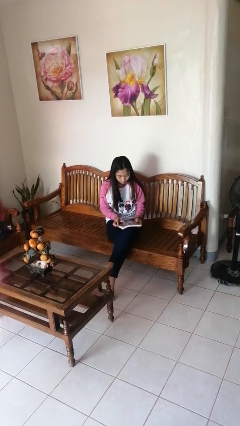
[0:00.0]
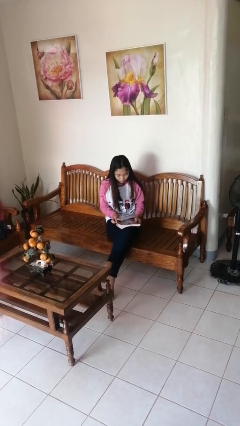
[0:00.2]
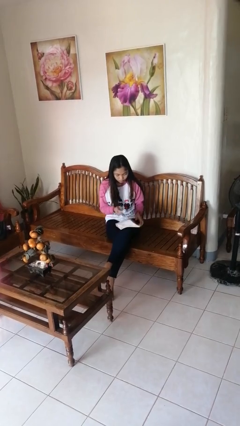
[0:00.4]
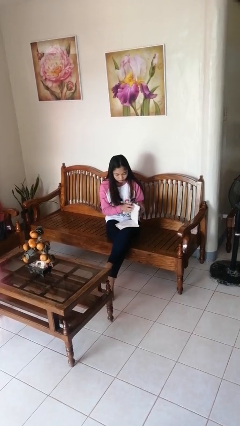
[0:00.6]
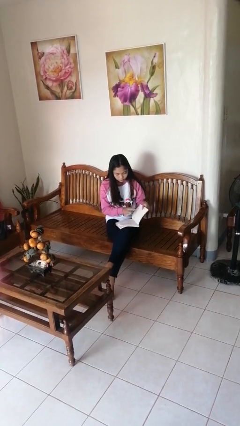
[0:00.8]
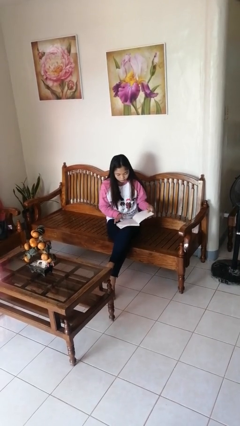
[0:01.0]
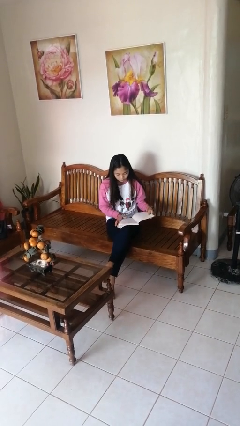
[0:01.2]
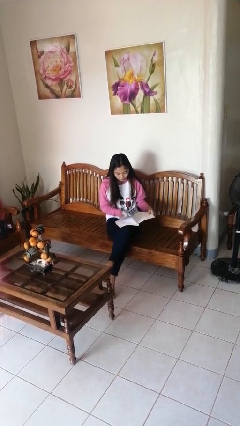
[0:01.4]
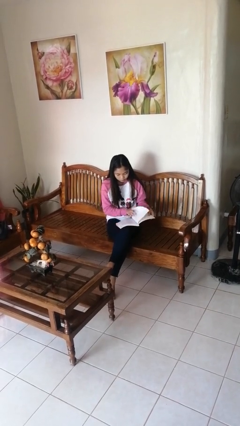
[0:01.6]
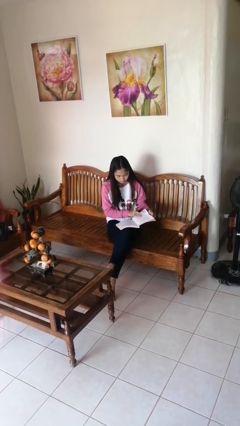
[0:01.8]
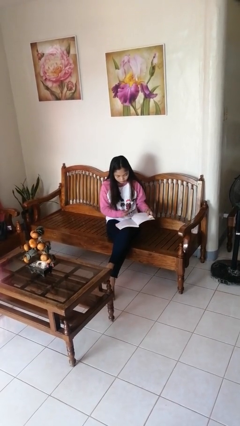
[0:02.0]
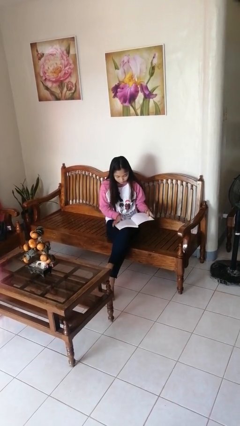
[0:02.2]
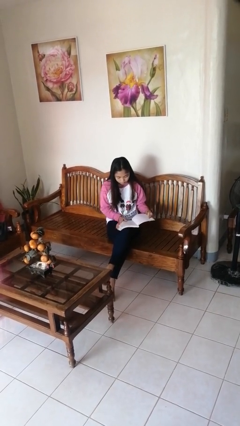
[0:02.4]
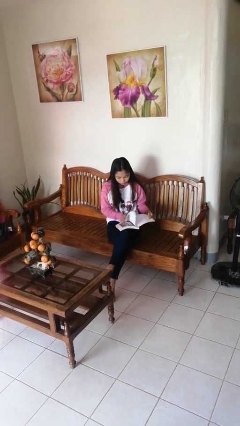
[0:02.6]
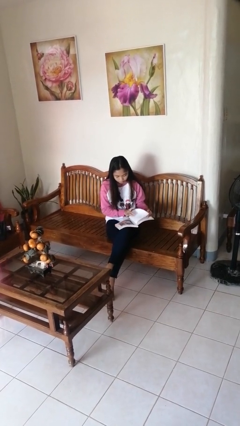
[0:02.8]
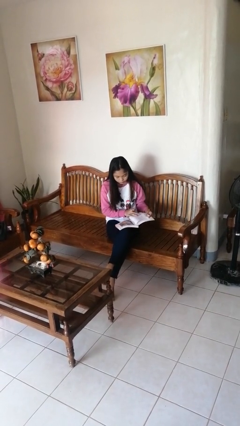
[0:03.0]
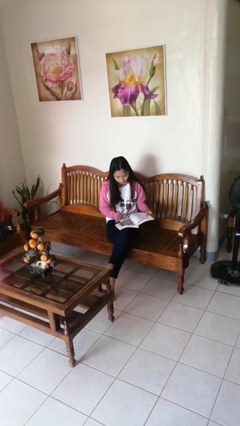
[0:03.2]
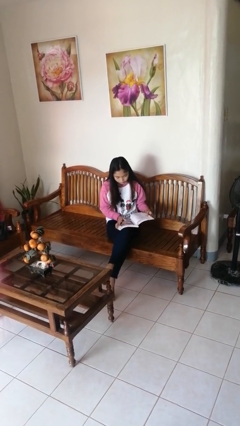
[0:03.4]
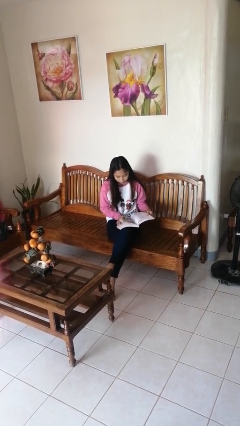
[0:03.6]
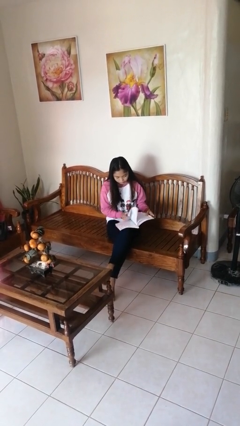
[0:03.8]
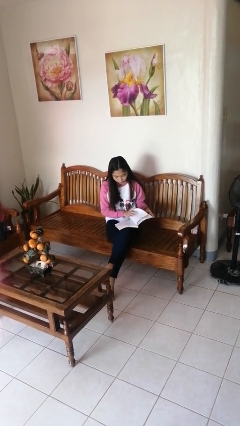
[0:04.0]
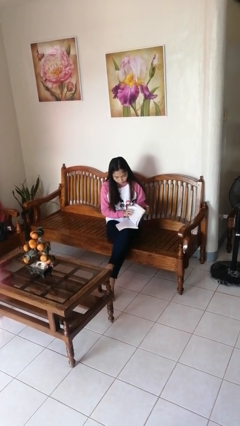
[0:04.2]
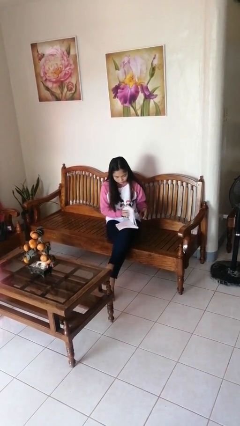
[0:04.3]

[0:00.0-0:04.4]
person reads book

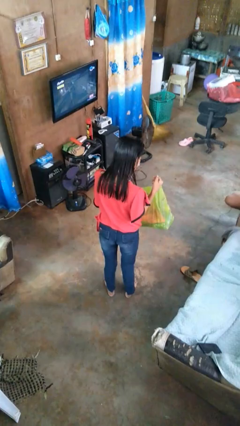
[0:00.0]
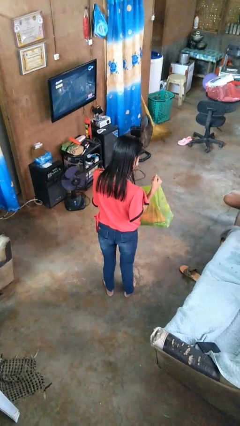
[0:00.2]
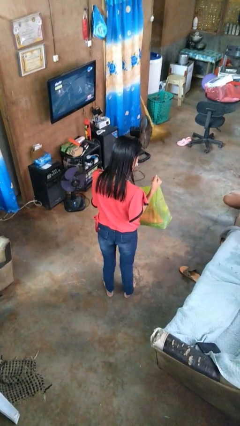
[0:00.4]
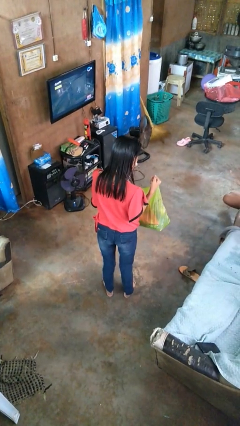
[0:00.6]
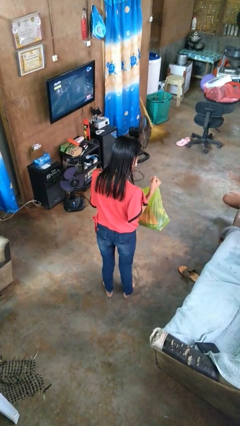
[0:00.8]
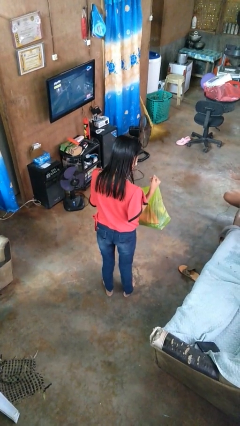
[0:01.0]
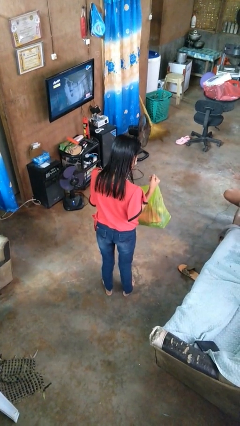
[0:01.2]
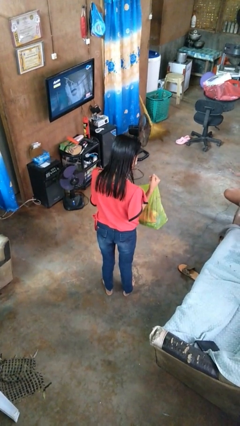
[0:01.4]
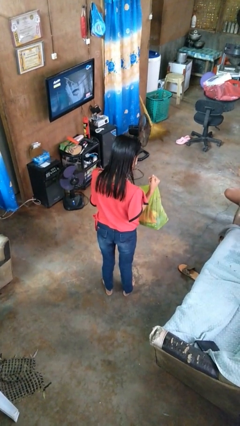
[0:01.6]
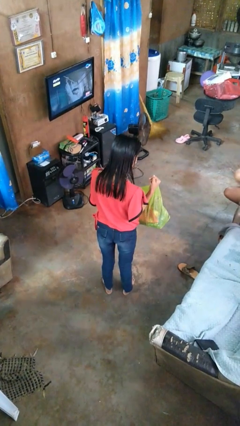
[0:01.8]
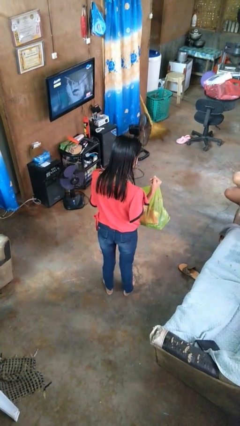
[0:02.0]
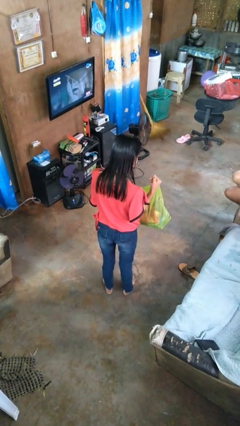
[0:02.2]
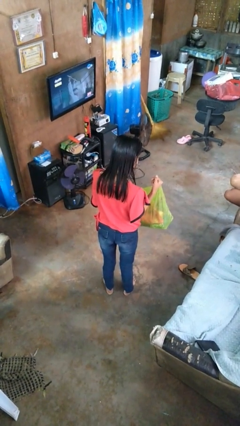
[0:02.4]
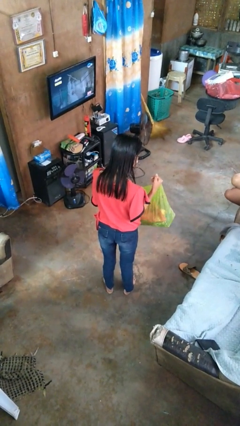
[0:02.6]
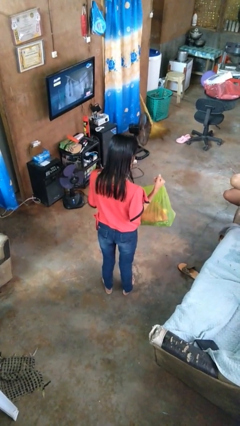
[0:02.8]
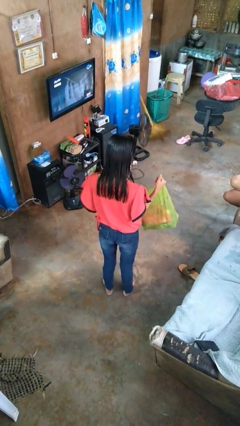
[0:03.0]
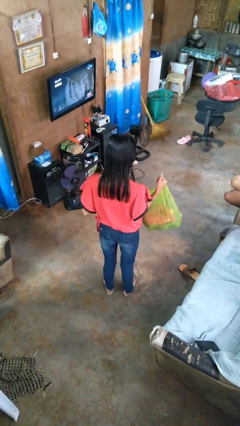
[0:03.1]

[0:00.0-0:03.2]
person searches in bag

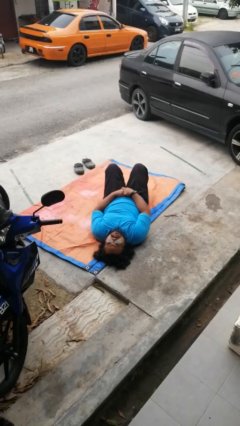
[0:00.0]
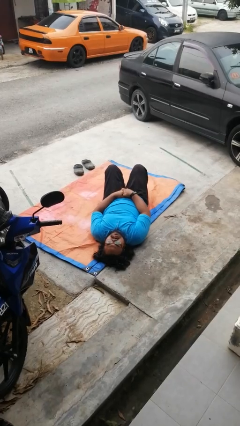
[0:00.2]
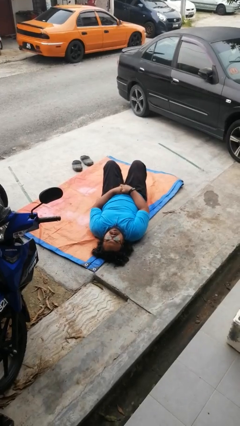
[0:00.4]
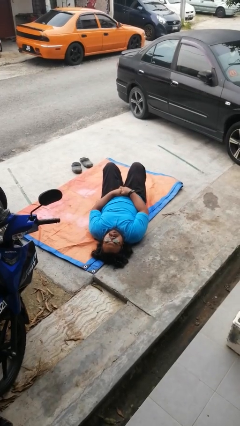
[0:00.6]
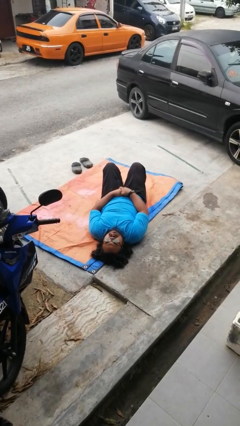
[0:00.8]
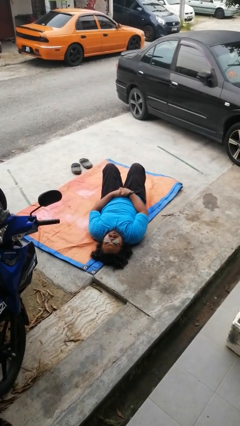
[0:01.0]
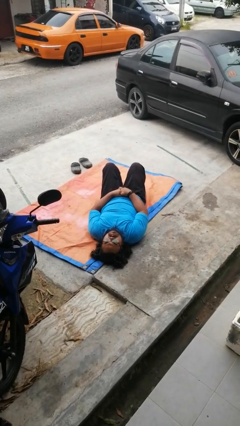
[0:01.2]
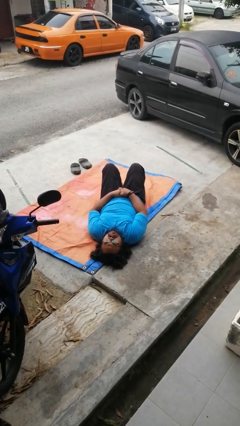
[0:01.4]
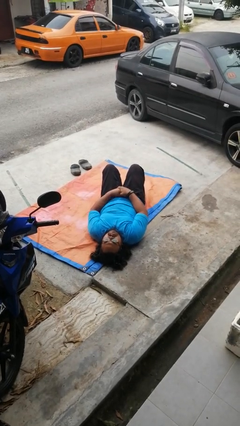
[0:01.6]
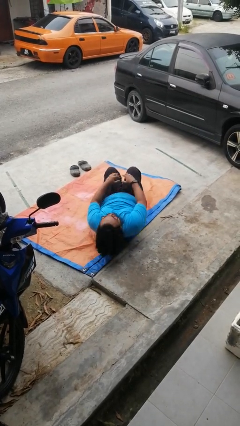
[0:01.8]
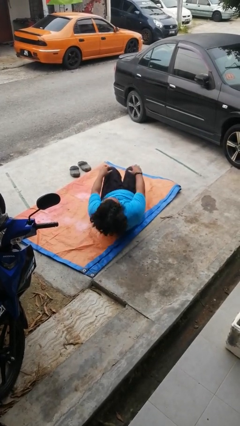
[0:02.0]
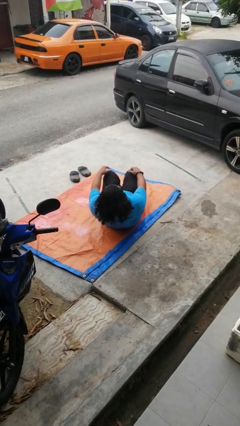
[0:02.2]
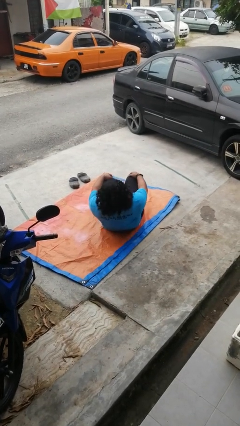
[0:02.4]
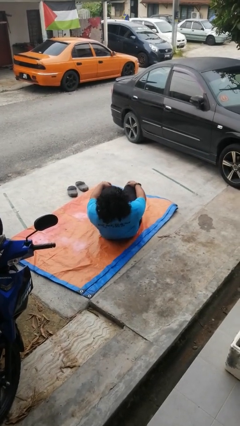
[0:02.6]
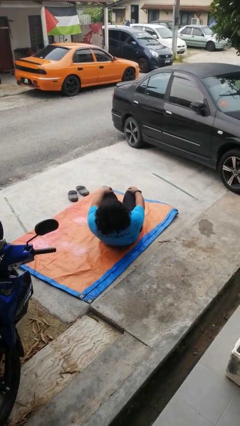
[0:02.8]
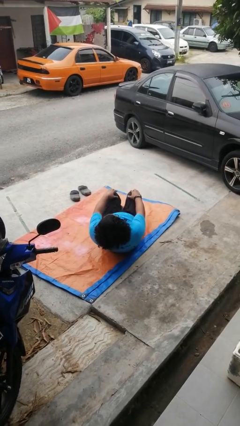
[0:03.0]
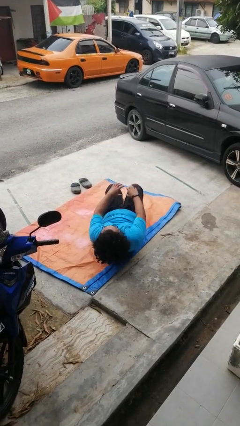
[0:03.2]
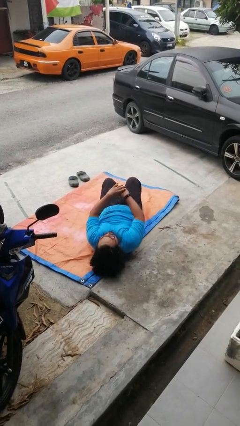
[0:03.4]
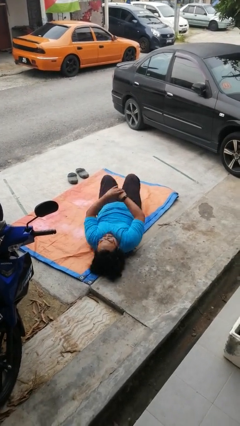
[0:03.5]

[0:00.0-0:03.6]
person exercises with situp

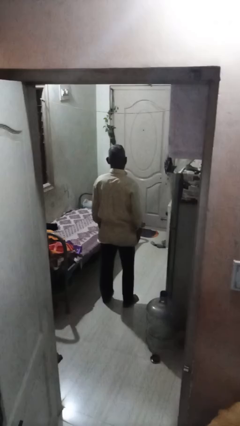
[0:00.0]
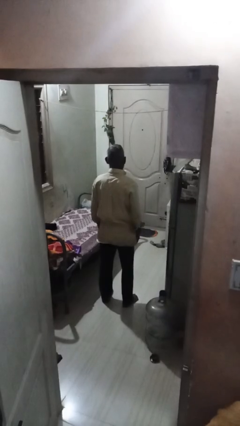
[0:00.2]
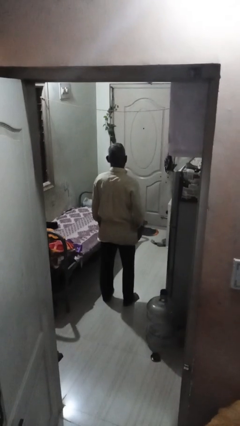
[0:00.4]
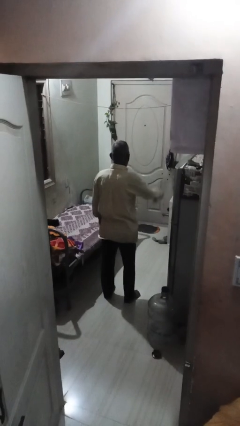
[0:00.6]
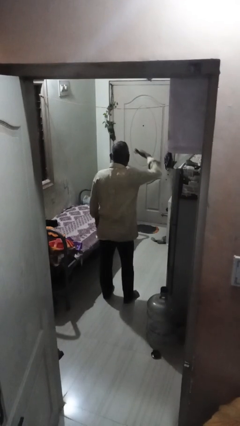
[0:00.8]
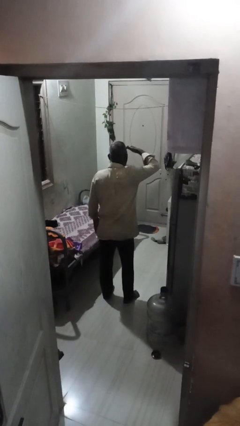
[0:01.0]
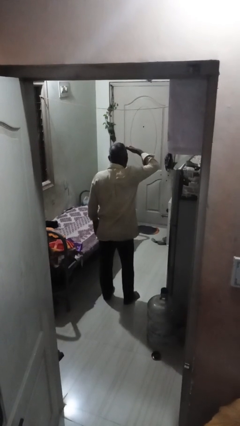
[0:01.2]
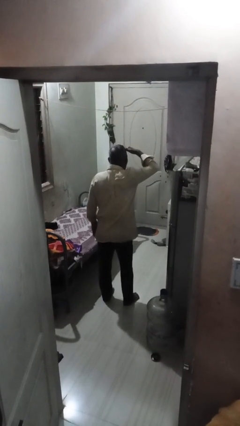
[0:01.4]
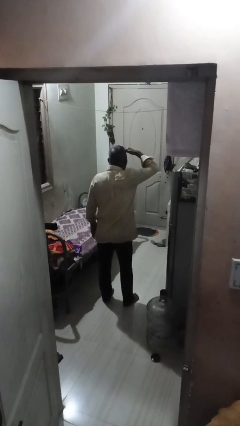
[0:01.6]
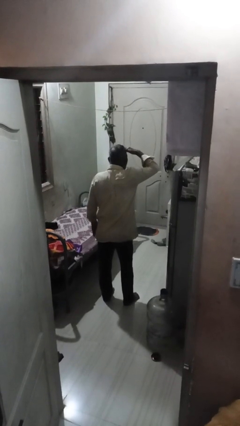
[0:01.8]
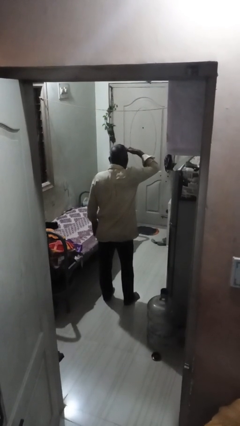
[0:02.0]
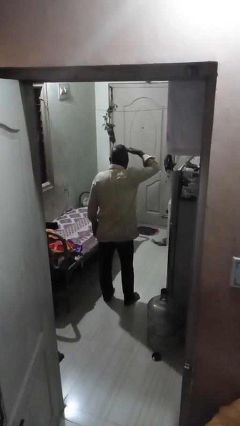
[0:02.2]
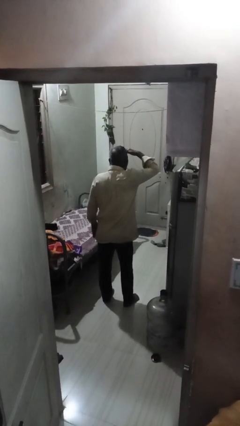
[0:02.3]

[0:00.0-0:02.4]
person shades eyes

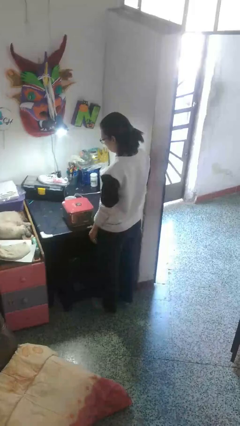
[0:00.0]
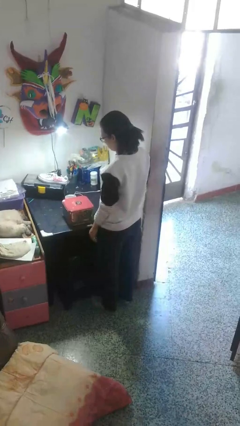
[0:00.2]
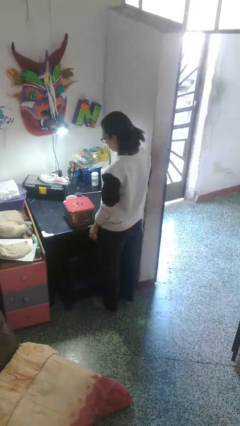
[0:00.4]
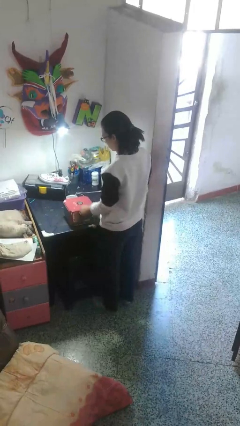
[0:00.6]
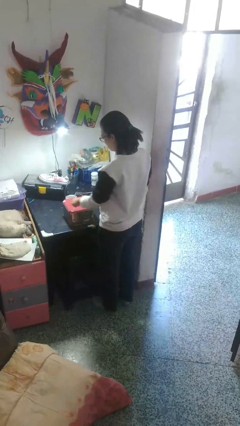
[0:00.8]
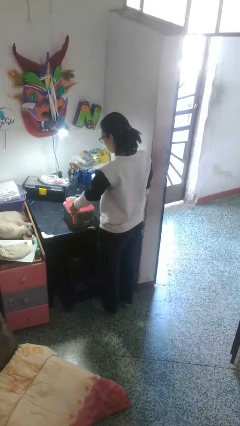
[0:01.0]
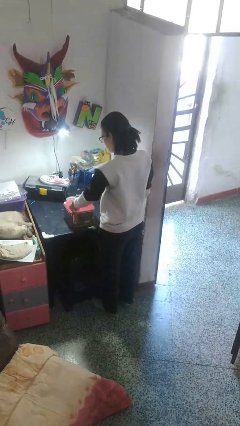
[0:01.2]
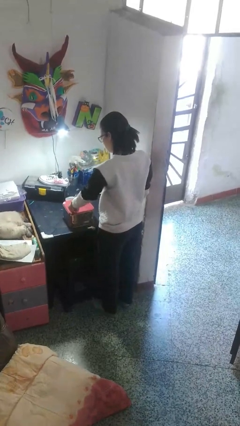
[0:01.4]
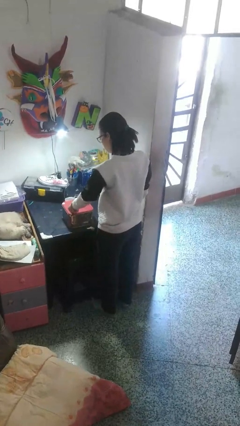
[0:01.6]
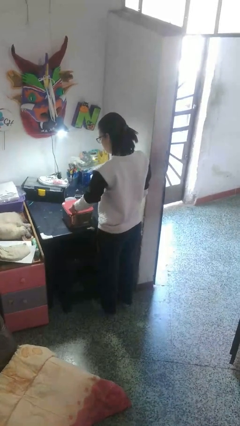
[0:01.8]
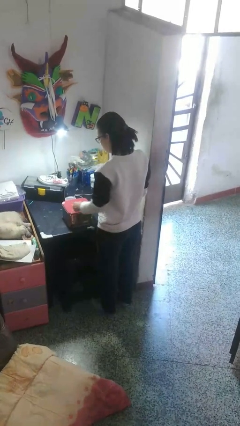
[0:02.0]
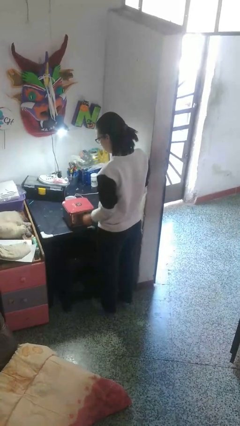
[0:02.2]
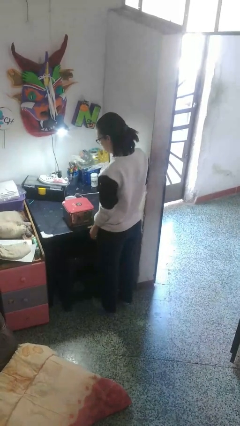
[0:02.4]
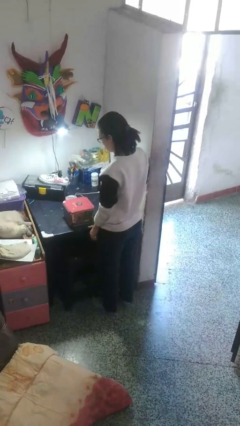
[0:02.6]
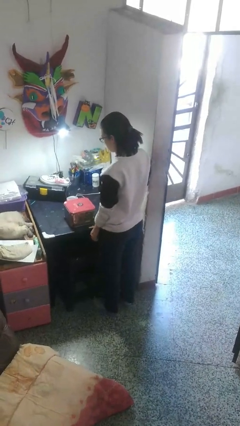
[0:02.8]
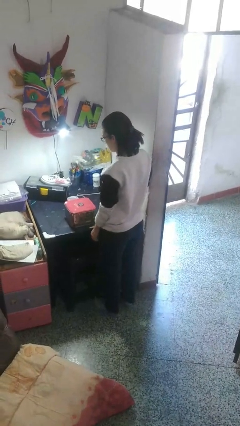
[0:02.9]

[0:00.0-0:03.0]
person taps object with finger

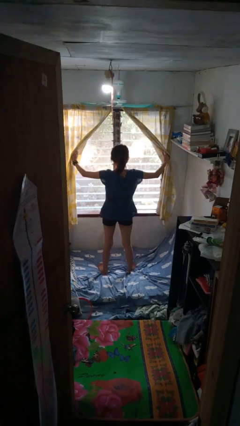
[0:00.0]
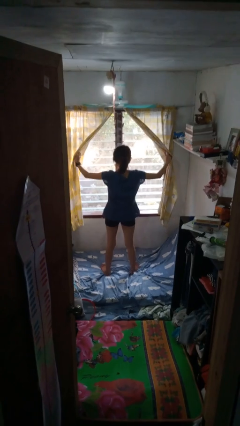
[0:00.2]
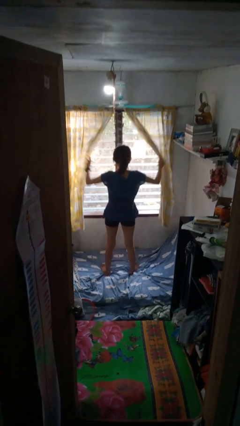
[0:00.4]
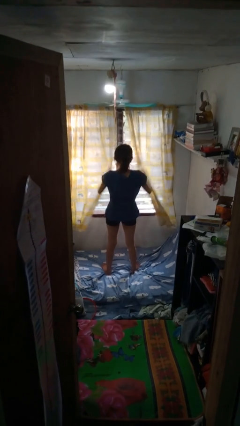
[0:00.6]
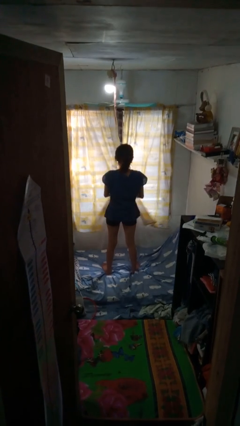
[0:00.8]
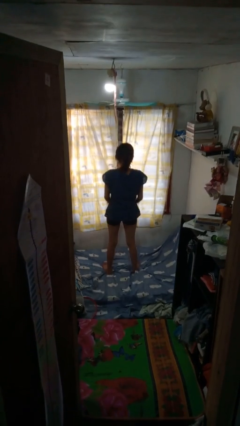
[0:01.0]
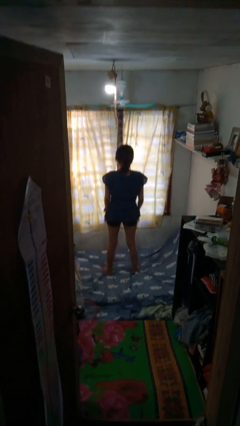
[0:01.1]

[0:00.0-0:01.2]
person closes curtains
